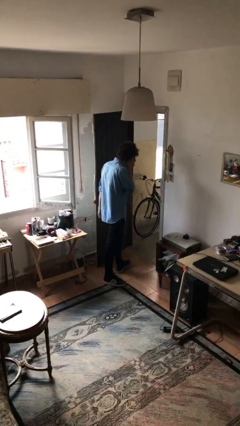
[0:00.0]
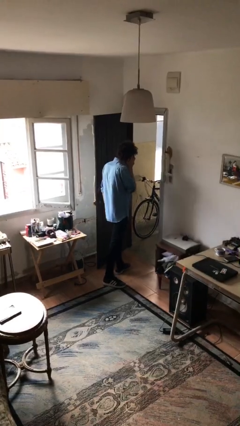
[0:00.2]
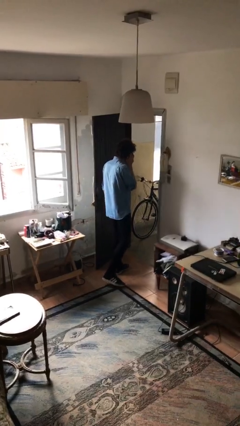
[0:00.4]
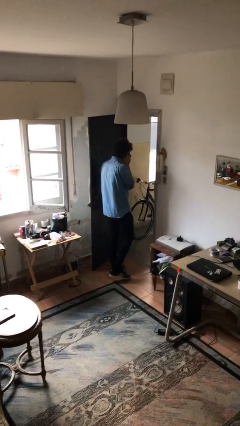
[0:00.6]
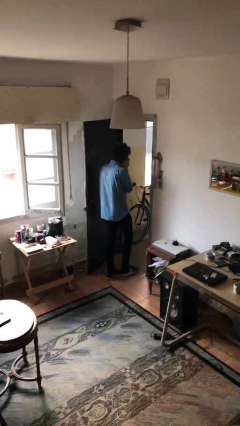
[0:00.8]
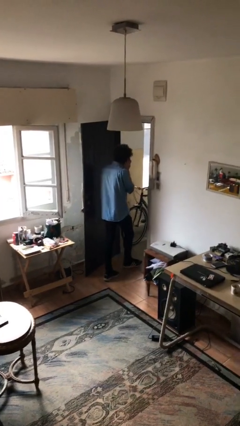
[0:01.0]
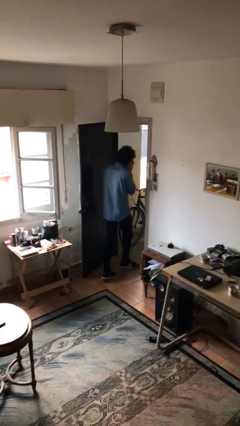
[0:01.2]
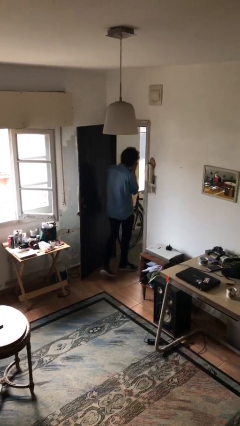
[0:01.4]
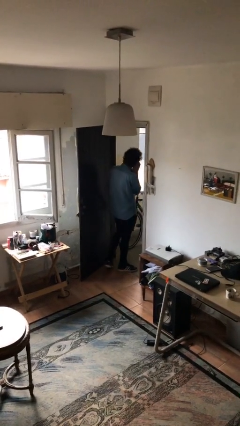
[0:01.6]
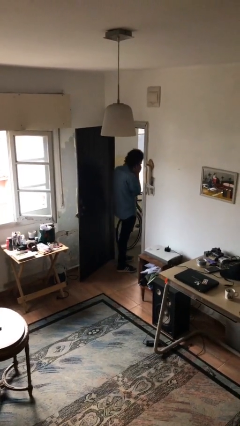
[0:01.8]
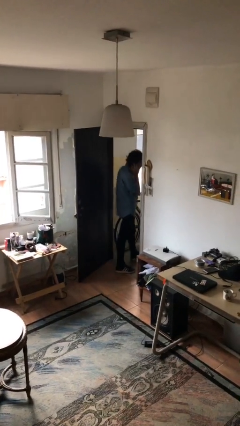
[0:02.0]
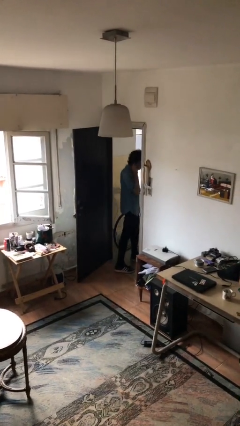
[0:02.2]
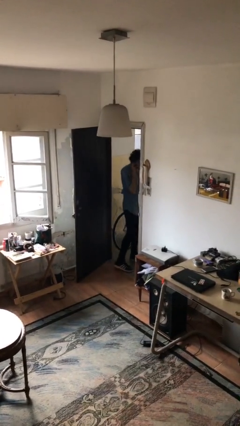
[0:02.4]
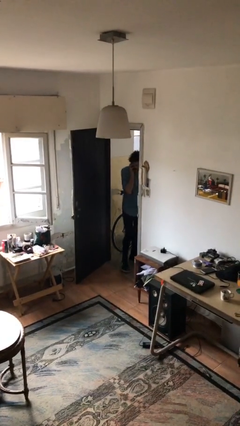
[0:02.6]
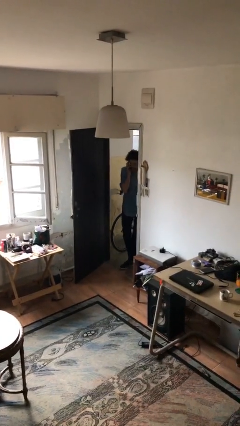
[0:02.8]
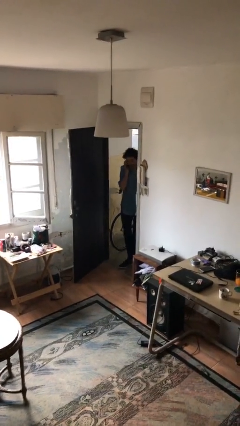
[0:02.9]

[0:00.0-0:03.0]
person exits scene through structure

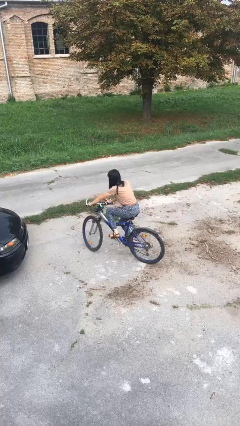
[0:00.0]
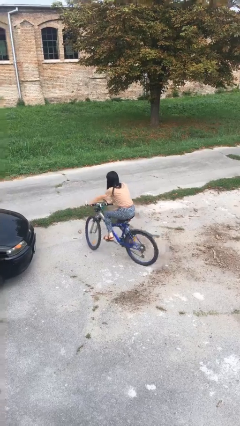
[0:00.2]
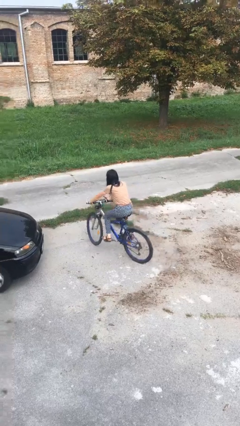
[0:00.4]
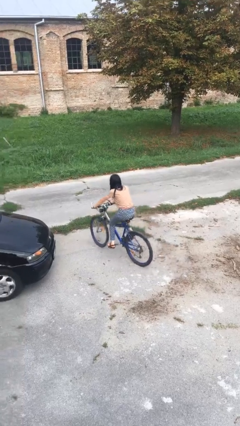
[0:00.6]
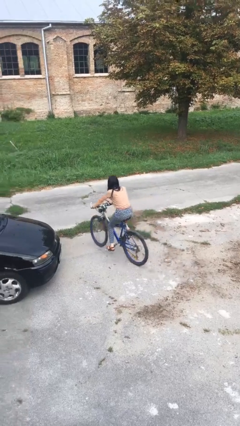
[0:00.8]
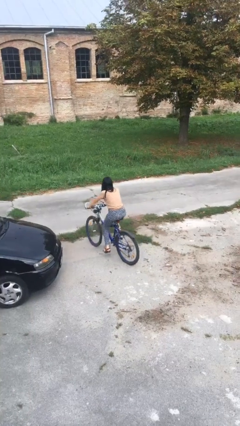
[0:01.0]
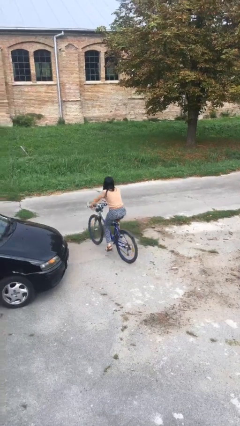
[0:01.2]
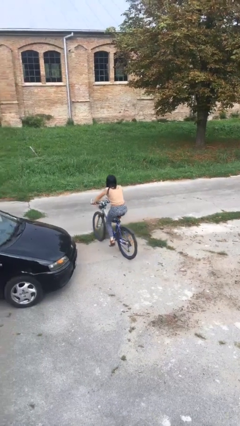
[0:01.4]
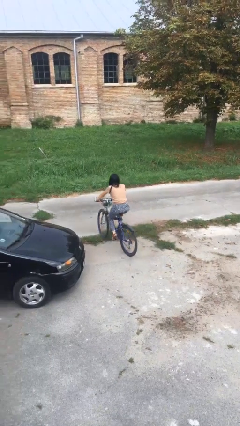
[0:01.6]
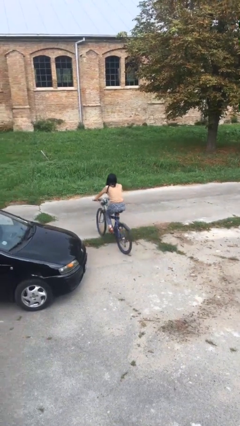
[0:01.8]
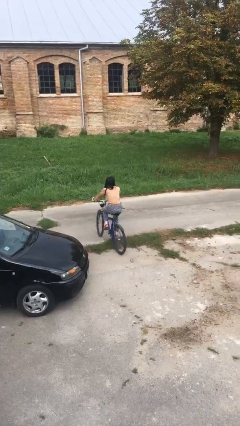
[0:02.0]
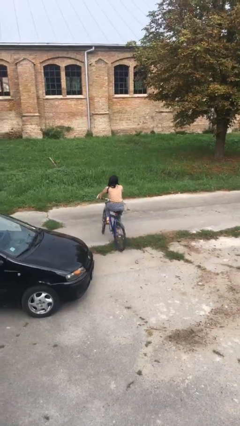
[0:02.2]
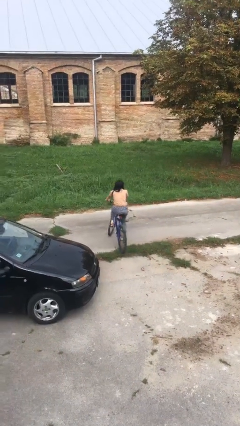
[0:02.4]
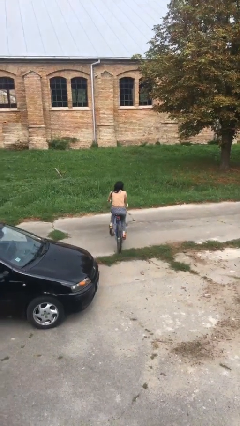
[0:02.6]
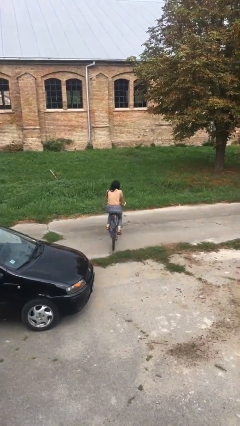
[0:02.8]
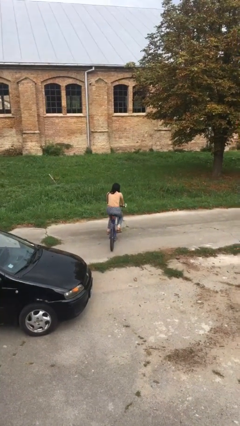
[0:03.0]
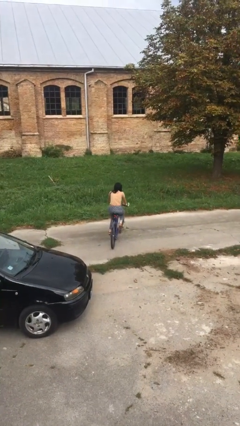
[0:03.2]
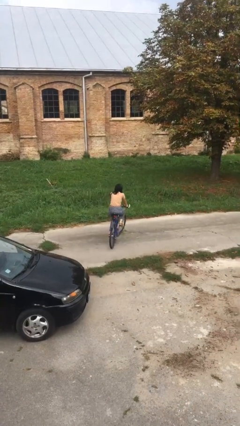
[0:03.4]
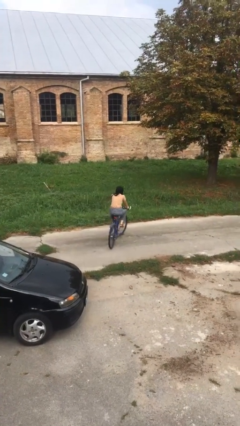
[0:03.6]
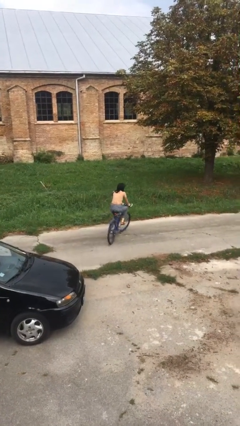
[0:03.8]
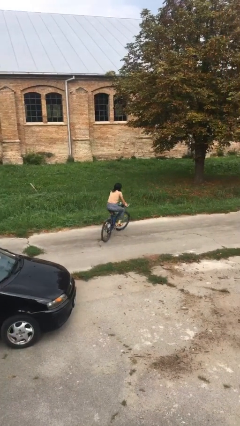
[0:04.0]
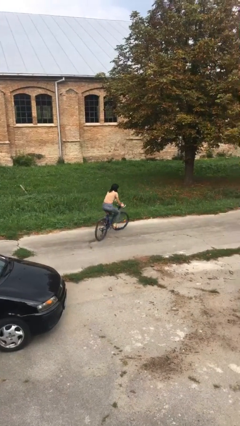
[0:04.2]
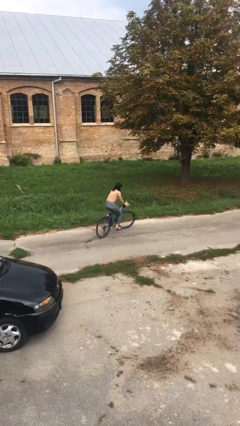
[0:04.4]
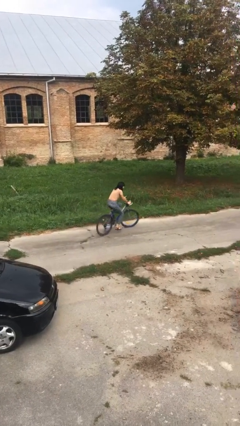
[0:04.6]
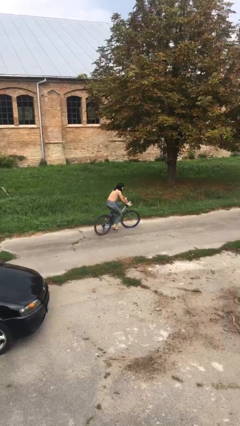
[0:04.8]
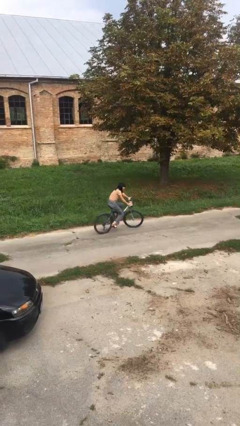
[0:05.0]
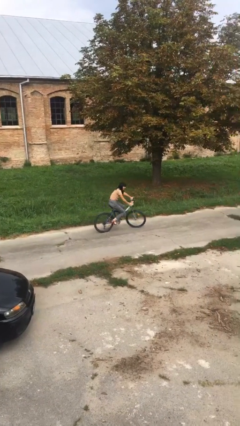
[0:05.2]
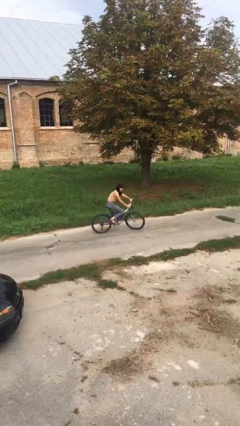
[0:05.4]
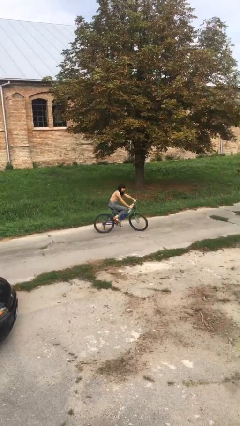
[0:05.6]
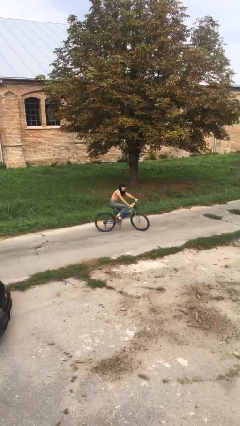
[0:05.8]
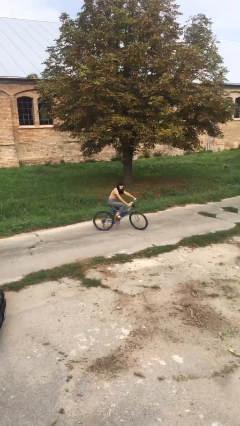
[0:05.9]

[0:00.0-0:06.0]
person rides bicycle

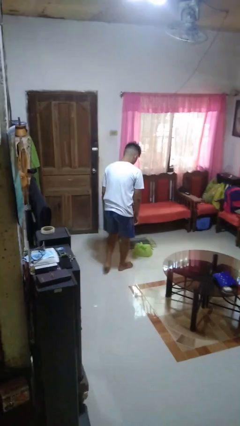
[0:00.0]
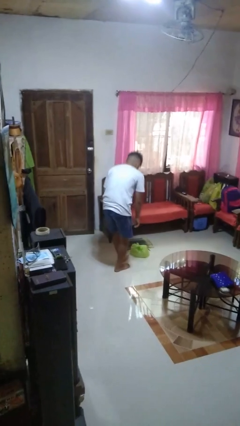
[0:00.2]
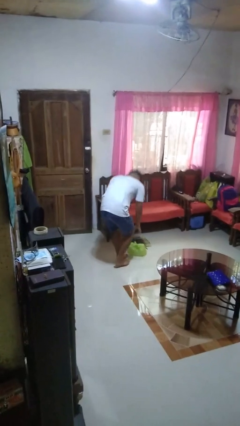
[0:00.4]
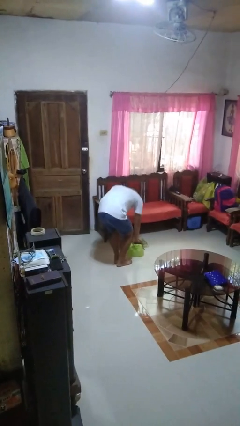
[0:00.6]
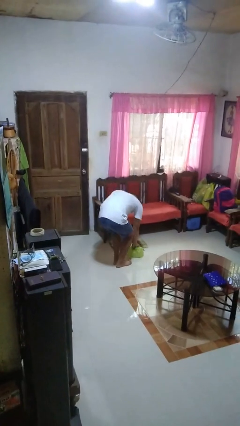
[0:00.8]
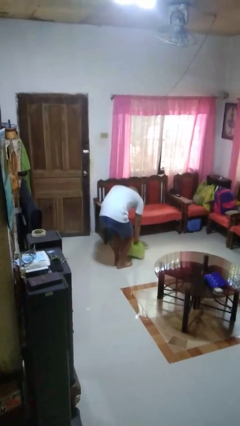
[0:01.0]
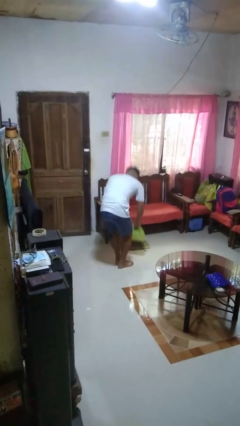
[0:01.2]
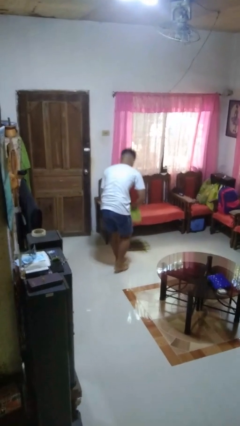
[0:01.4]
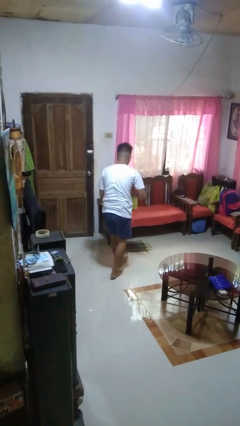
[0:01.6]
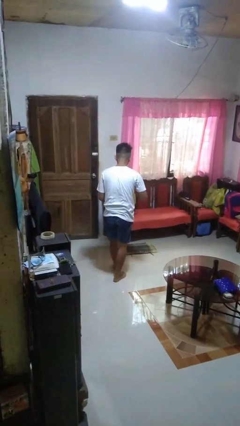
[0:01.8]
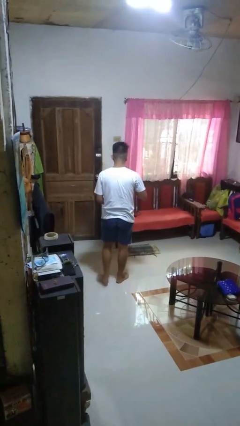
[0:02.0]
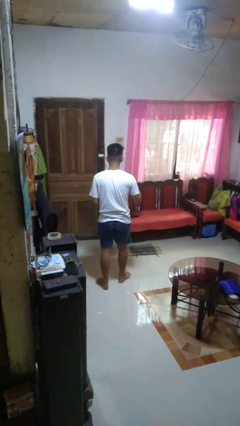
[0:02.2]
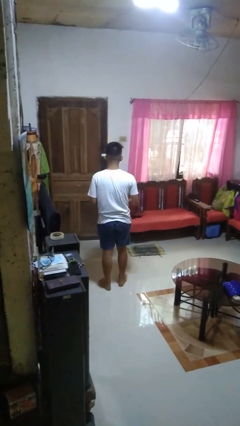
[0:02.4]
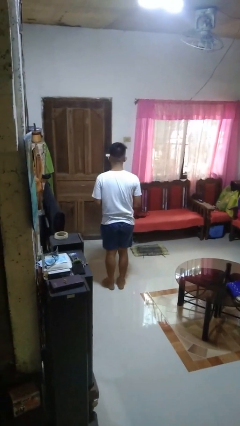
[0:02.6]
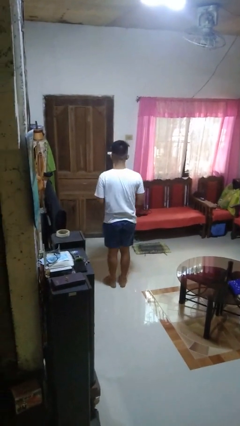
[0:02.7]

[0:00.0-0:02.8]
person picks up object from floor

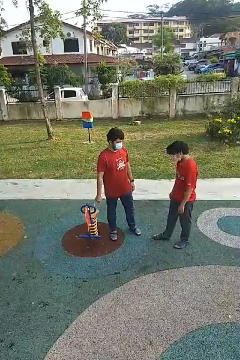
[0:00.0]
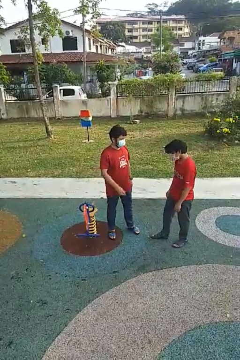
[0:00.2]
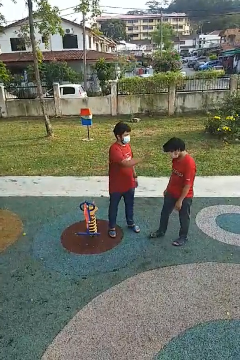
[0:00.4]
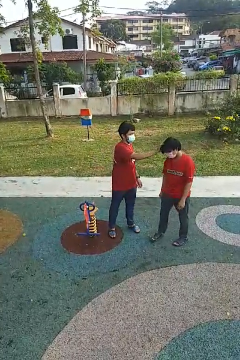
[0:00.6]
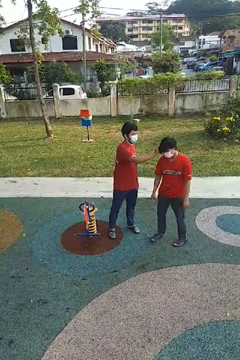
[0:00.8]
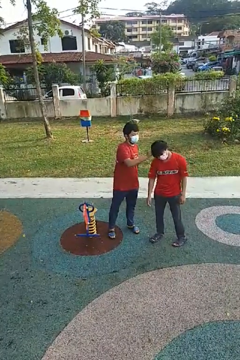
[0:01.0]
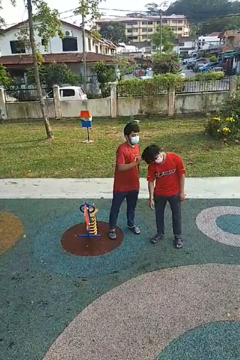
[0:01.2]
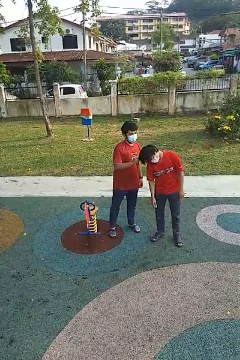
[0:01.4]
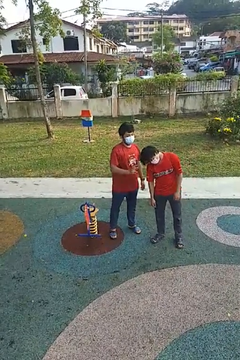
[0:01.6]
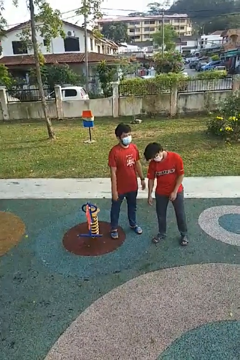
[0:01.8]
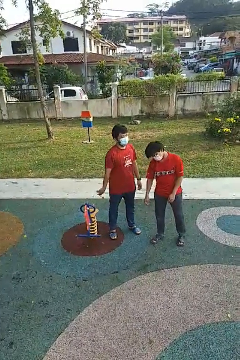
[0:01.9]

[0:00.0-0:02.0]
person grabs person by hair

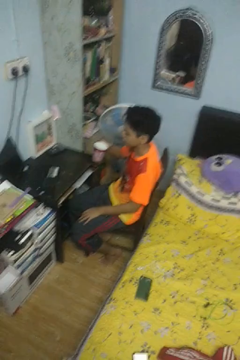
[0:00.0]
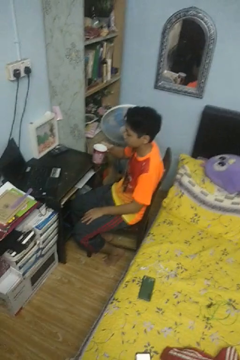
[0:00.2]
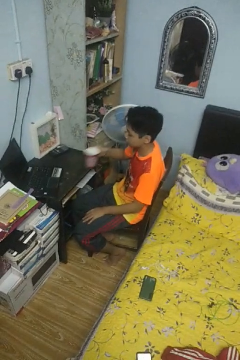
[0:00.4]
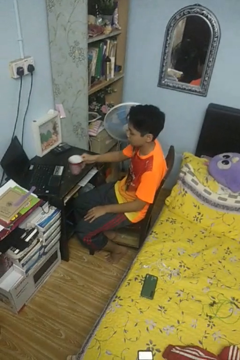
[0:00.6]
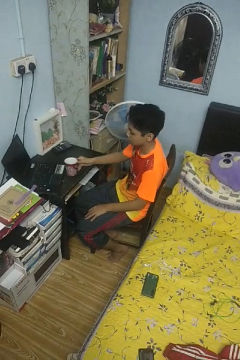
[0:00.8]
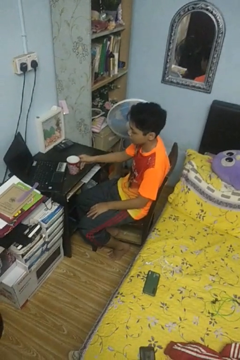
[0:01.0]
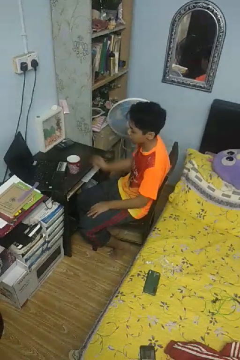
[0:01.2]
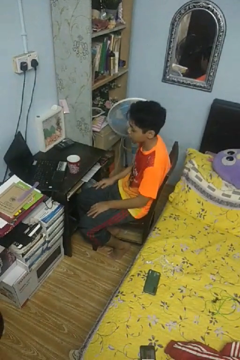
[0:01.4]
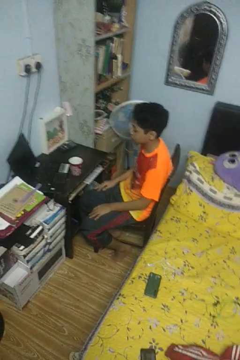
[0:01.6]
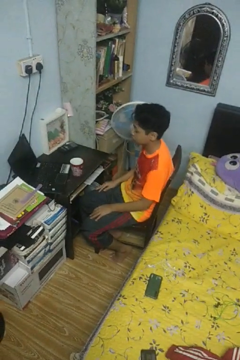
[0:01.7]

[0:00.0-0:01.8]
person opens refrigerator

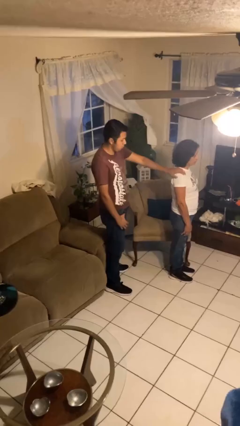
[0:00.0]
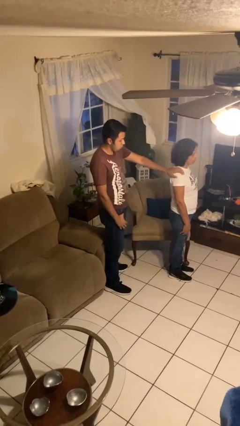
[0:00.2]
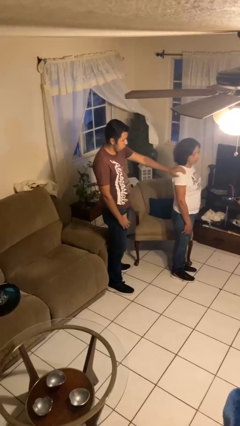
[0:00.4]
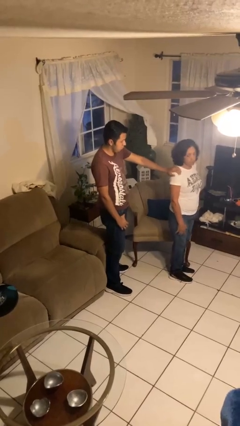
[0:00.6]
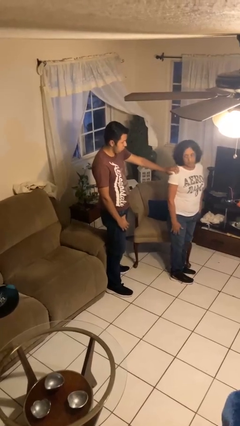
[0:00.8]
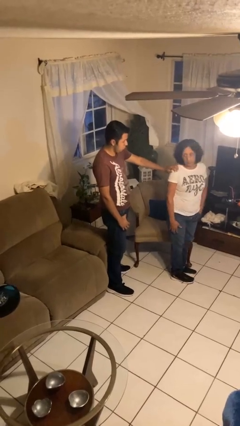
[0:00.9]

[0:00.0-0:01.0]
person grabs person by shoulder

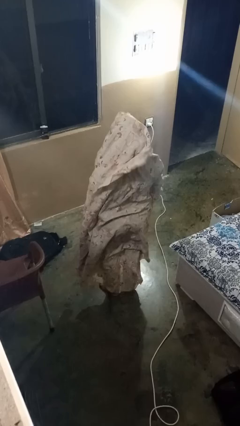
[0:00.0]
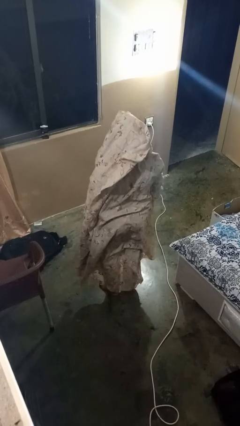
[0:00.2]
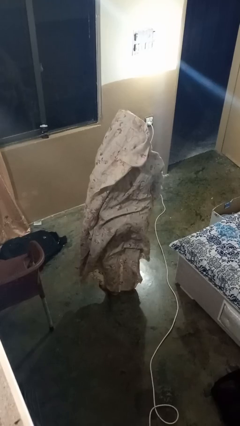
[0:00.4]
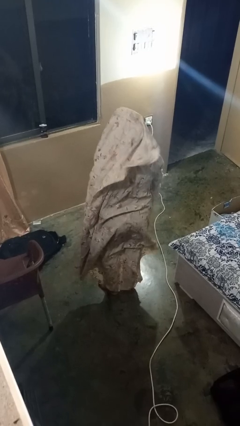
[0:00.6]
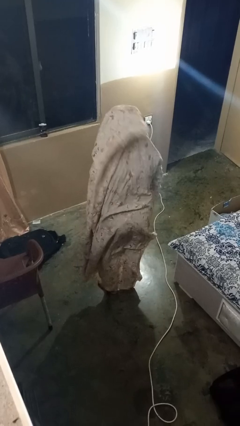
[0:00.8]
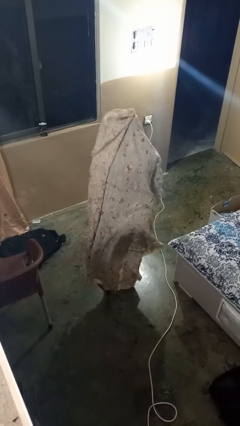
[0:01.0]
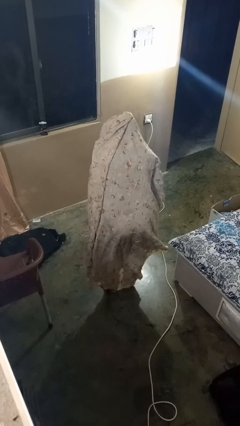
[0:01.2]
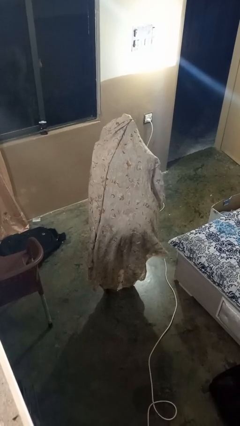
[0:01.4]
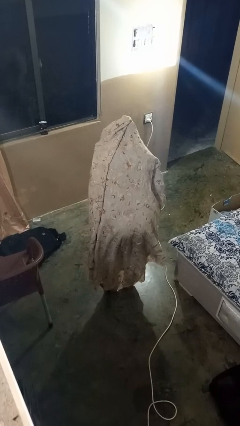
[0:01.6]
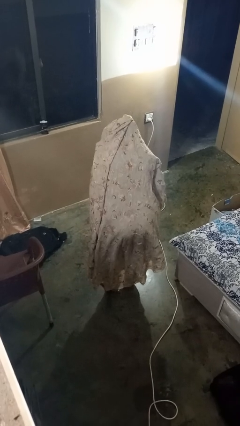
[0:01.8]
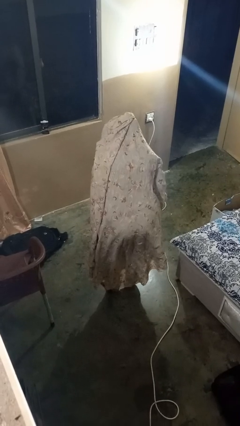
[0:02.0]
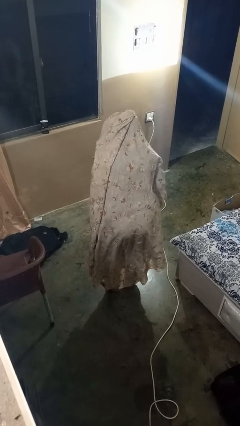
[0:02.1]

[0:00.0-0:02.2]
person bows
